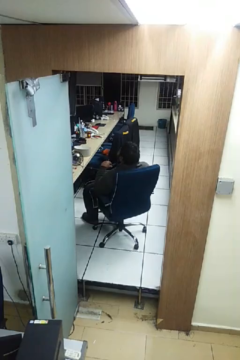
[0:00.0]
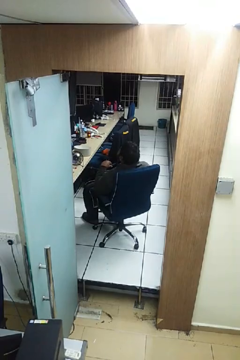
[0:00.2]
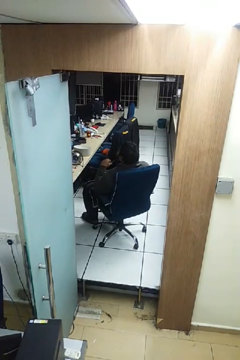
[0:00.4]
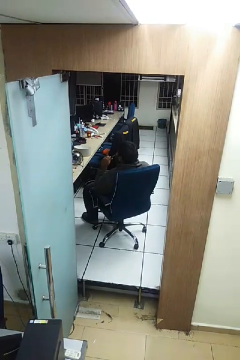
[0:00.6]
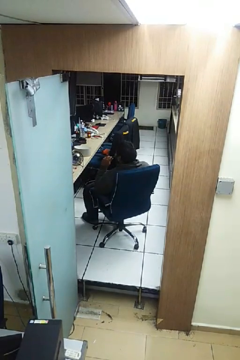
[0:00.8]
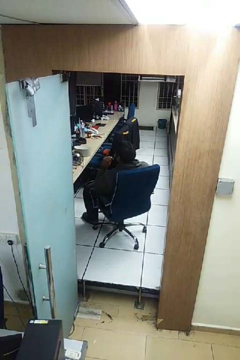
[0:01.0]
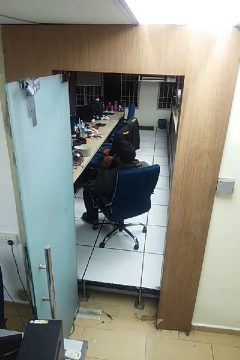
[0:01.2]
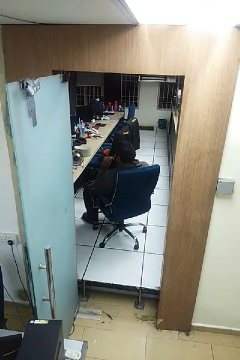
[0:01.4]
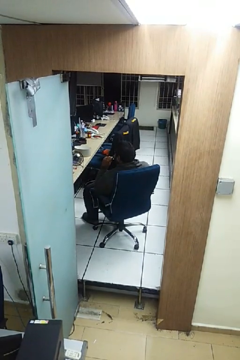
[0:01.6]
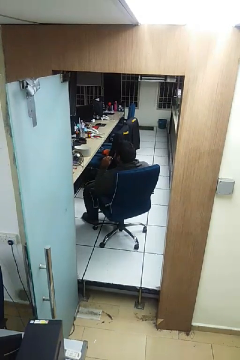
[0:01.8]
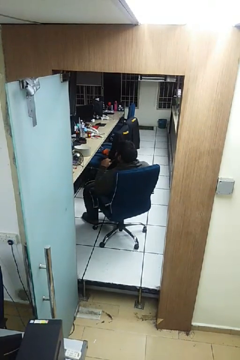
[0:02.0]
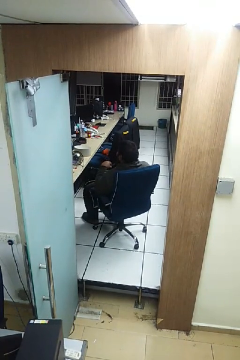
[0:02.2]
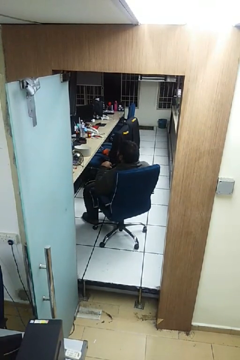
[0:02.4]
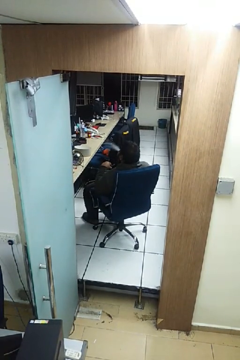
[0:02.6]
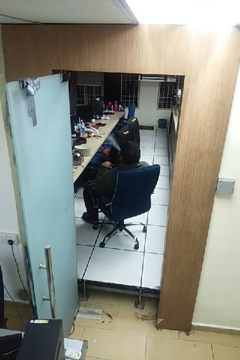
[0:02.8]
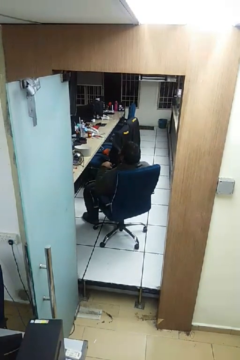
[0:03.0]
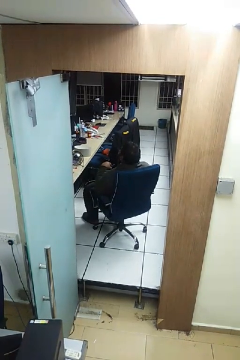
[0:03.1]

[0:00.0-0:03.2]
person vapes

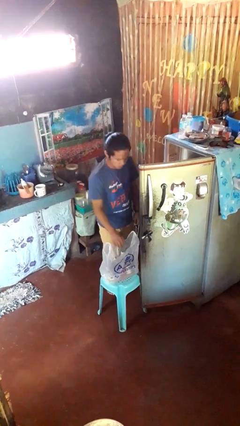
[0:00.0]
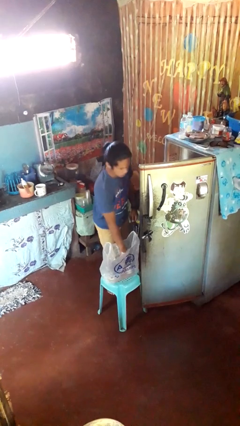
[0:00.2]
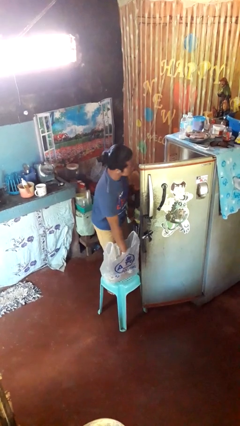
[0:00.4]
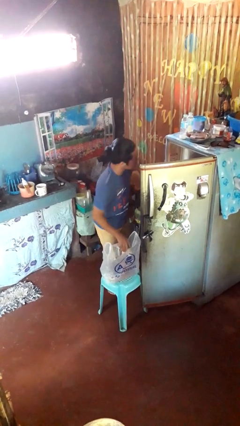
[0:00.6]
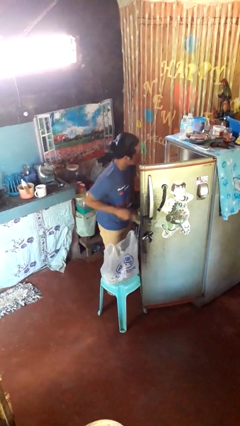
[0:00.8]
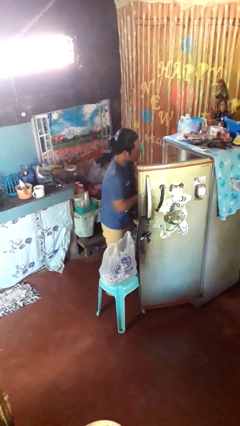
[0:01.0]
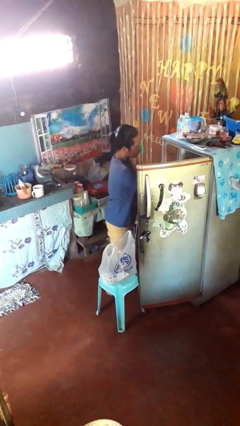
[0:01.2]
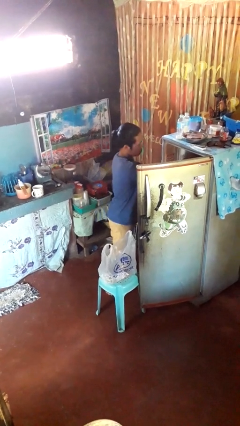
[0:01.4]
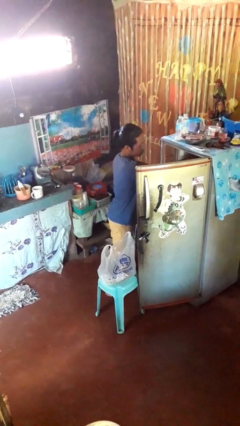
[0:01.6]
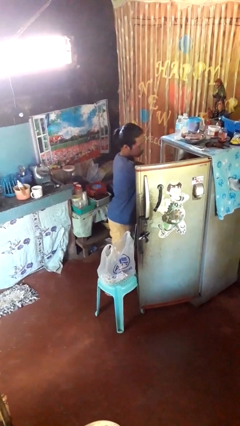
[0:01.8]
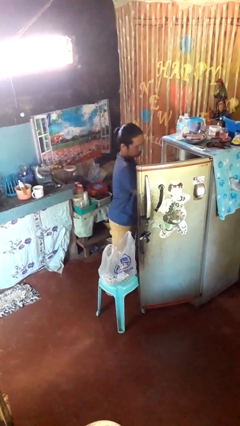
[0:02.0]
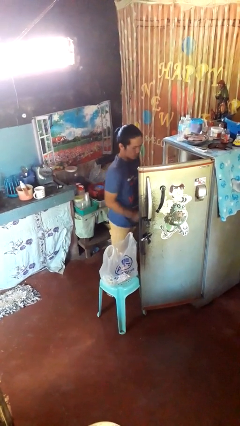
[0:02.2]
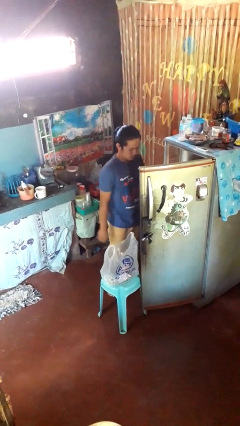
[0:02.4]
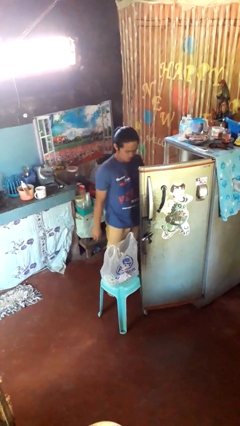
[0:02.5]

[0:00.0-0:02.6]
person loads groceries into refrigerator

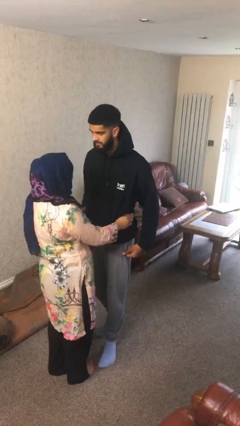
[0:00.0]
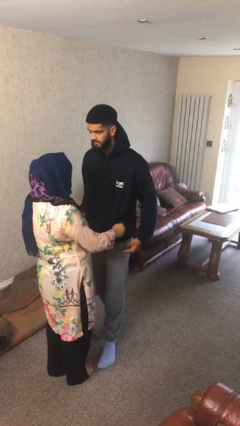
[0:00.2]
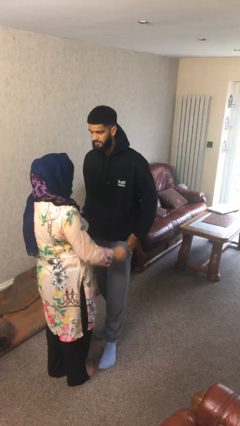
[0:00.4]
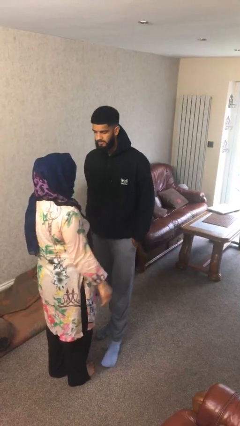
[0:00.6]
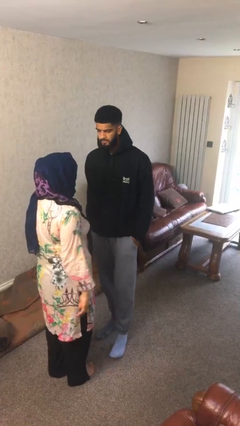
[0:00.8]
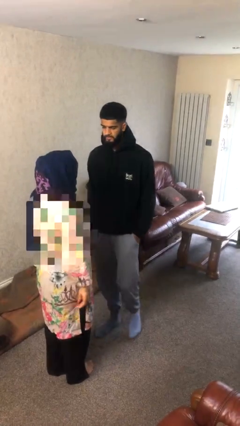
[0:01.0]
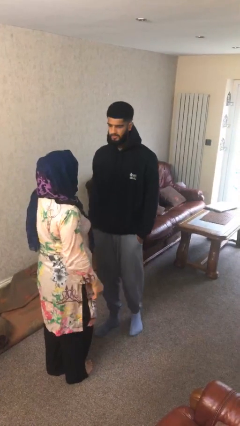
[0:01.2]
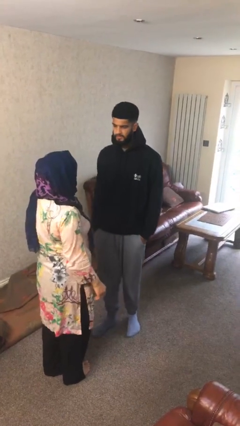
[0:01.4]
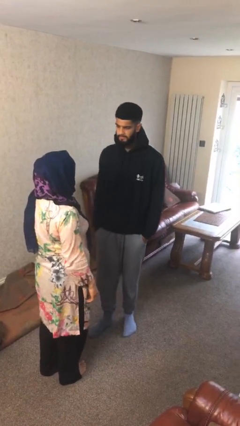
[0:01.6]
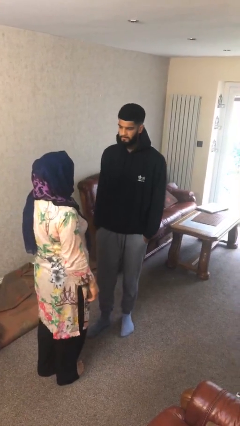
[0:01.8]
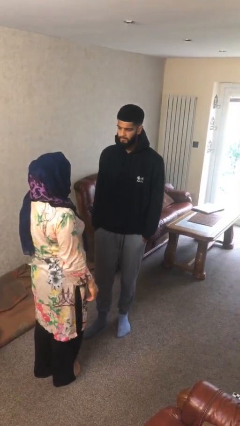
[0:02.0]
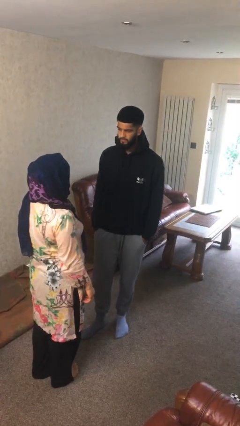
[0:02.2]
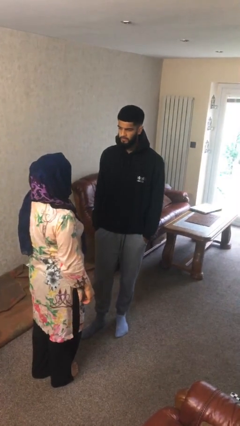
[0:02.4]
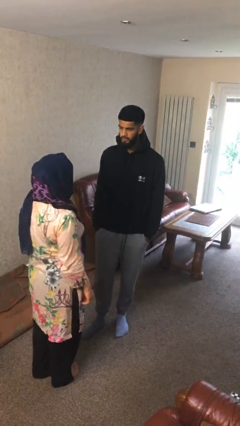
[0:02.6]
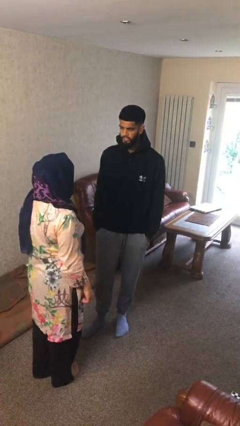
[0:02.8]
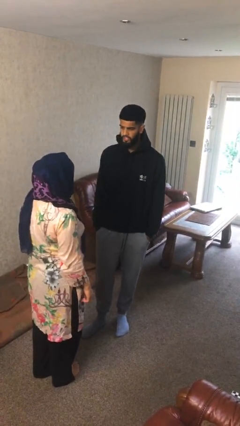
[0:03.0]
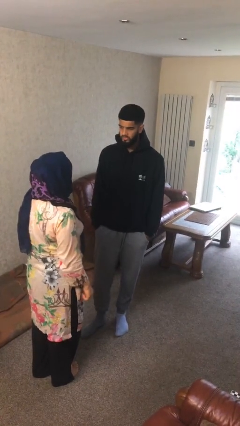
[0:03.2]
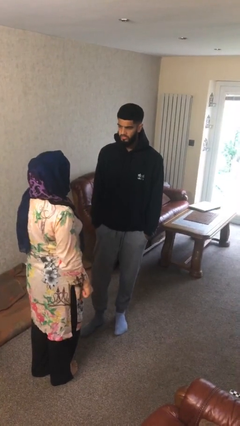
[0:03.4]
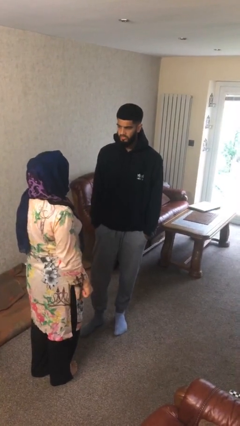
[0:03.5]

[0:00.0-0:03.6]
person talks to person

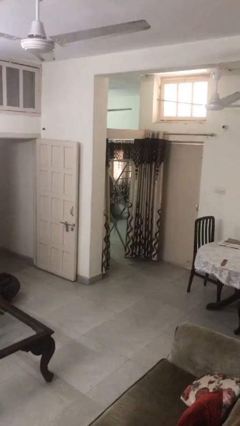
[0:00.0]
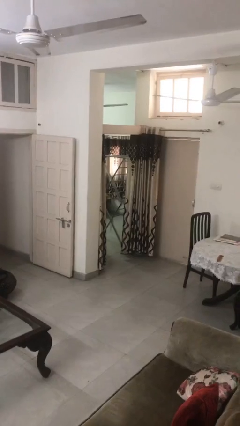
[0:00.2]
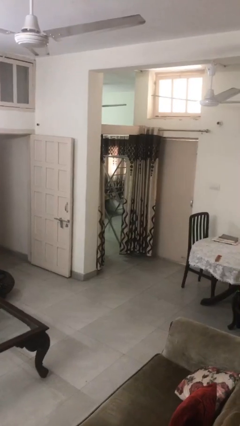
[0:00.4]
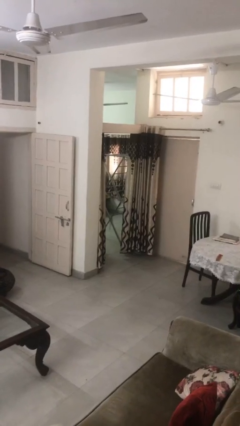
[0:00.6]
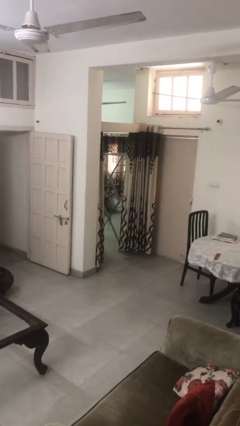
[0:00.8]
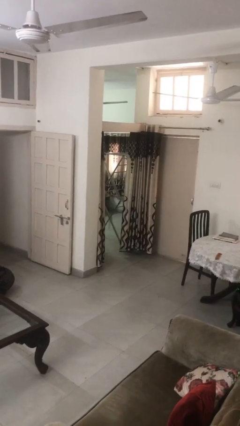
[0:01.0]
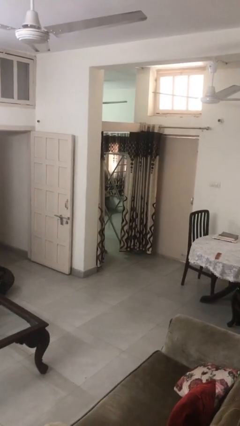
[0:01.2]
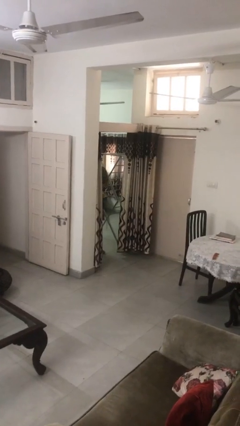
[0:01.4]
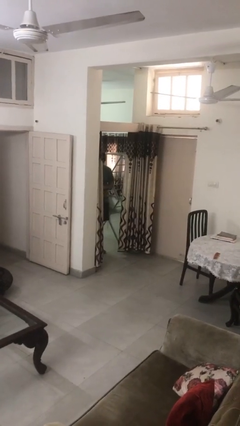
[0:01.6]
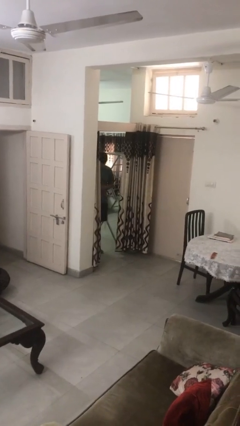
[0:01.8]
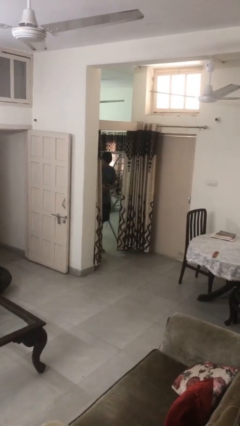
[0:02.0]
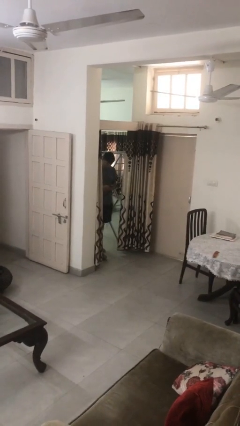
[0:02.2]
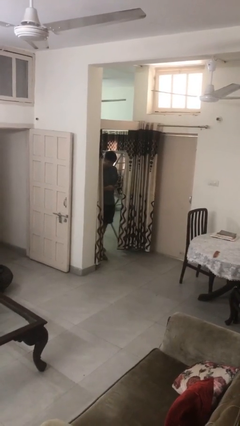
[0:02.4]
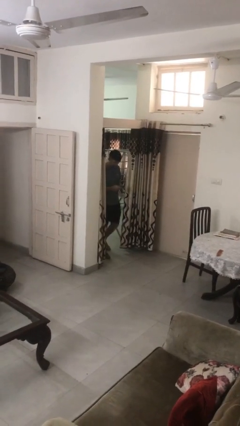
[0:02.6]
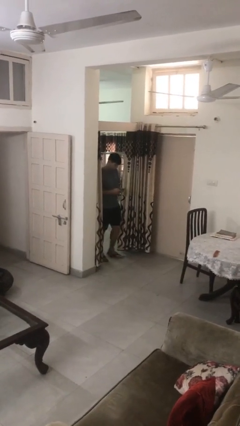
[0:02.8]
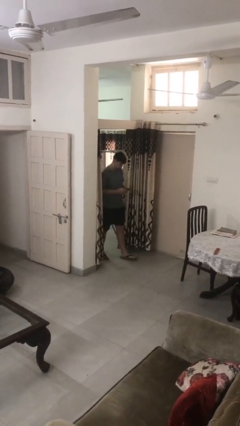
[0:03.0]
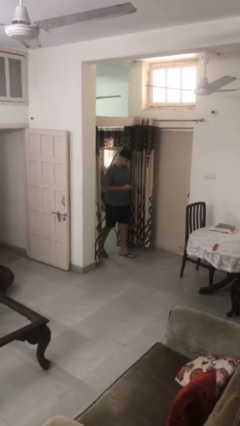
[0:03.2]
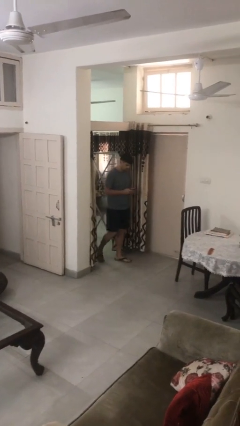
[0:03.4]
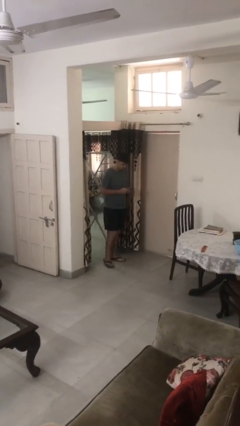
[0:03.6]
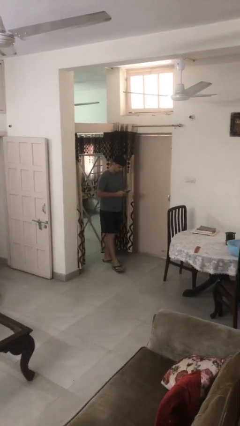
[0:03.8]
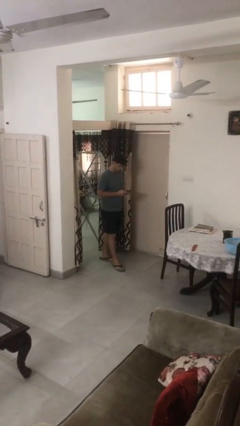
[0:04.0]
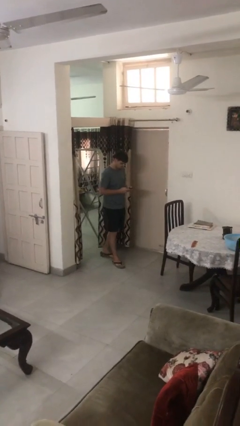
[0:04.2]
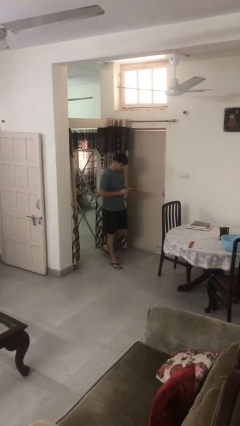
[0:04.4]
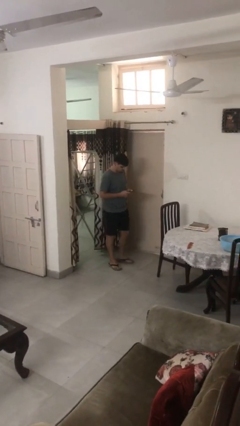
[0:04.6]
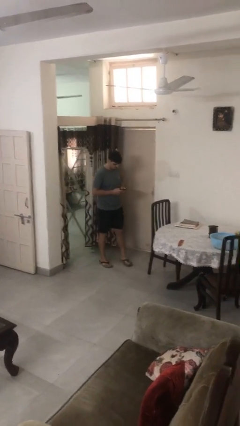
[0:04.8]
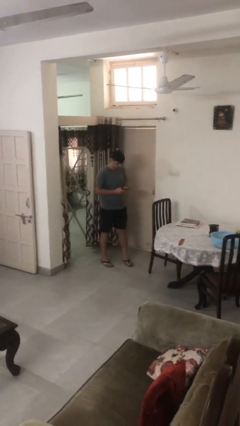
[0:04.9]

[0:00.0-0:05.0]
person enters scene through structure

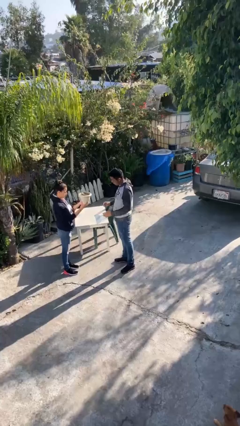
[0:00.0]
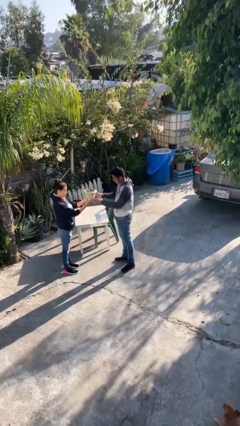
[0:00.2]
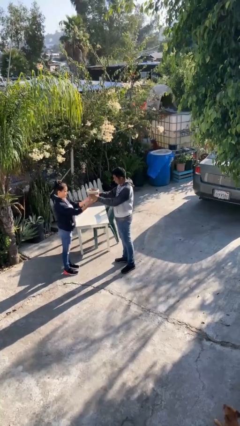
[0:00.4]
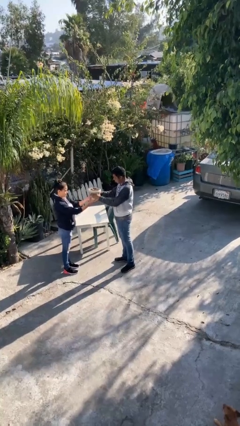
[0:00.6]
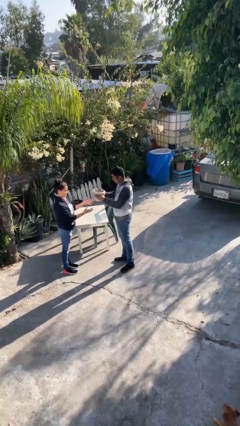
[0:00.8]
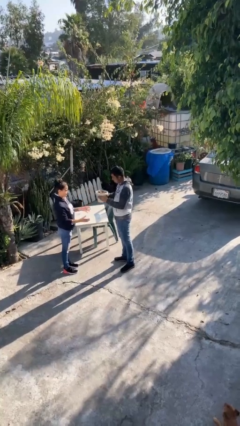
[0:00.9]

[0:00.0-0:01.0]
person transfers object to person

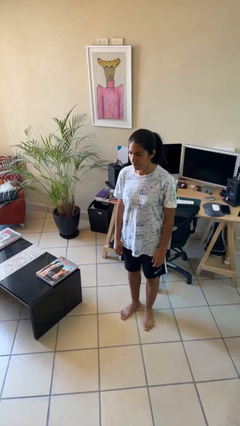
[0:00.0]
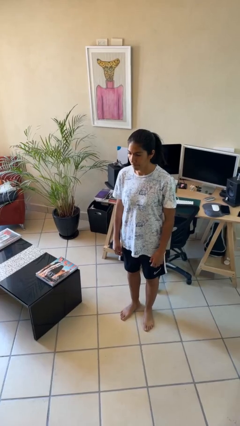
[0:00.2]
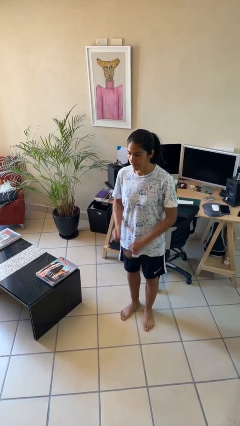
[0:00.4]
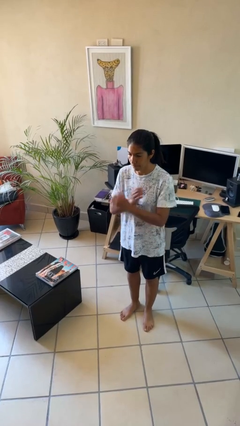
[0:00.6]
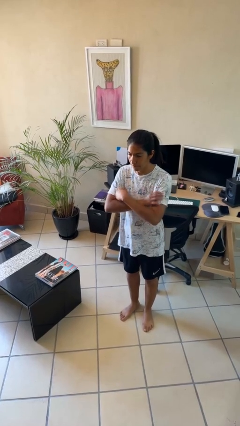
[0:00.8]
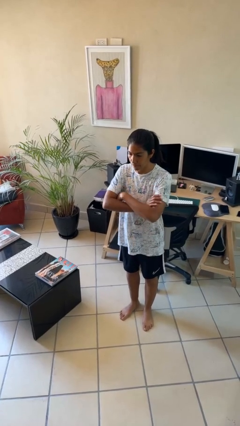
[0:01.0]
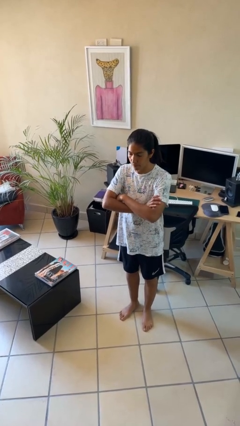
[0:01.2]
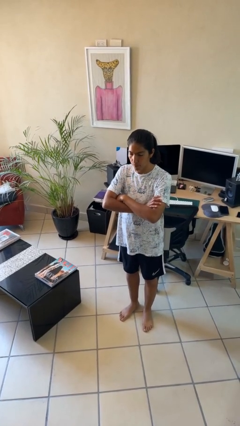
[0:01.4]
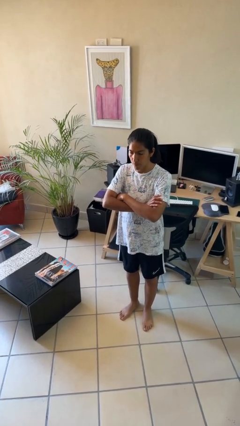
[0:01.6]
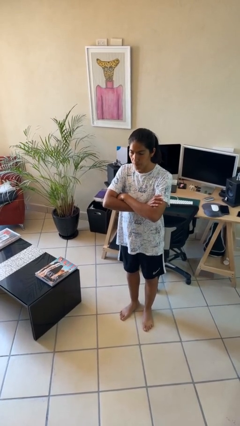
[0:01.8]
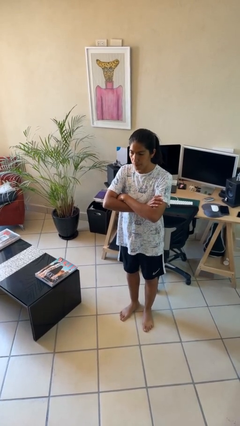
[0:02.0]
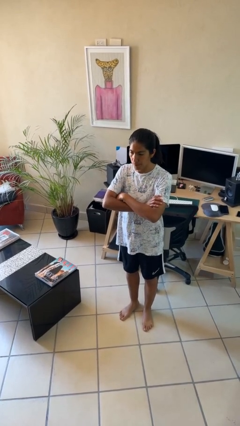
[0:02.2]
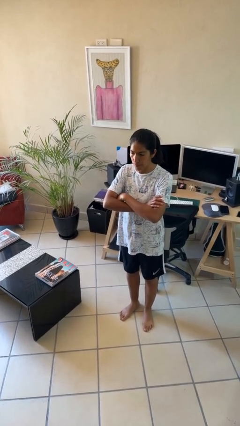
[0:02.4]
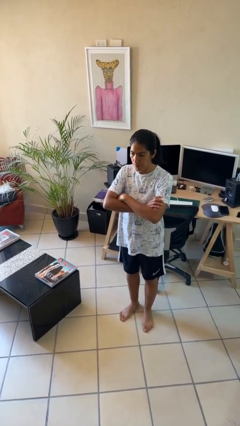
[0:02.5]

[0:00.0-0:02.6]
person crosses arms

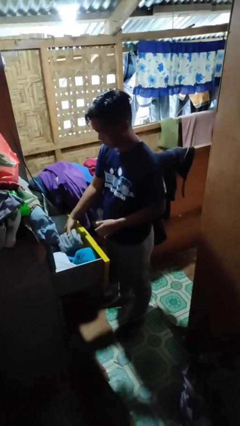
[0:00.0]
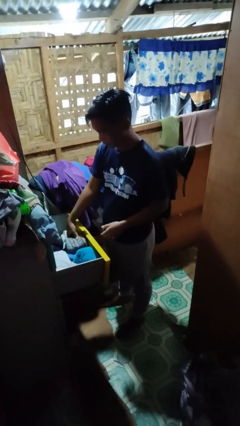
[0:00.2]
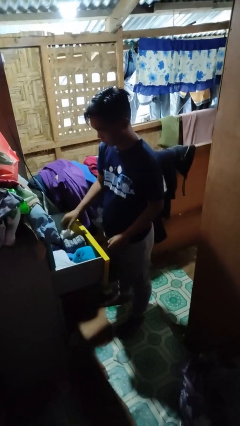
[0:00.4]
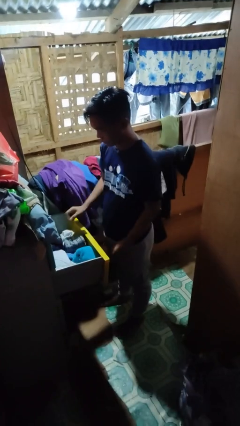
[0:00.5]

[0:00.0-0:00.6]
person puts clothes into dresser
